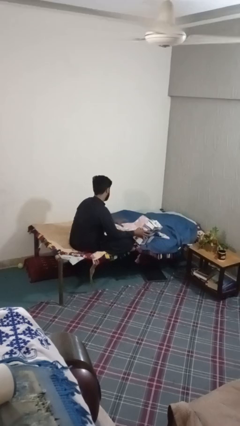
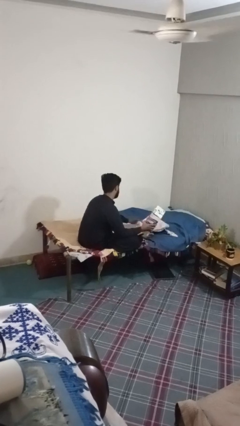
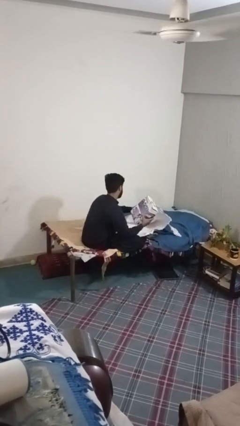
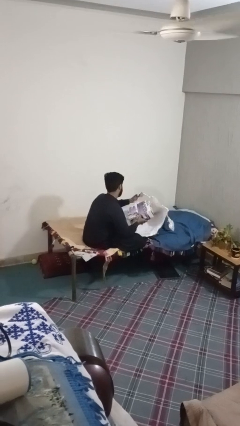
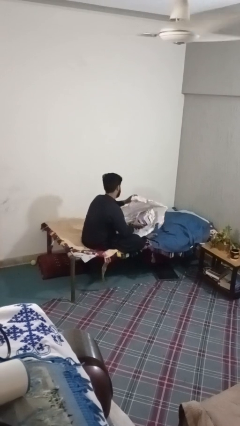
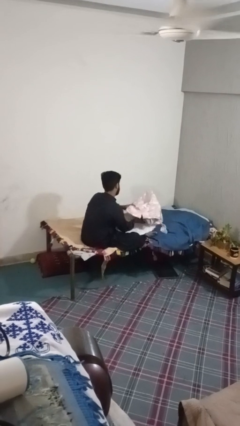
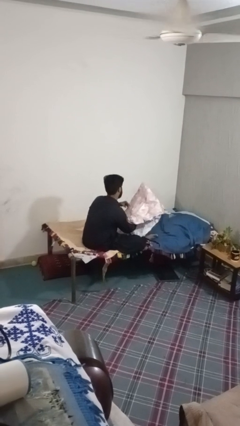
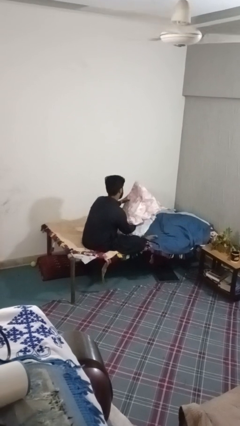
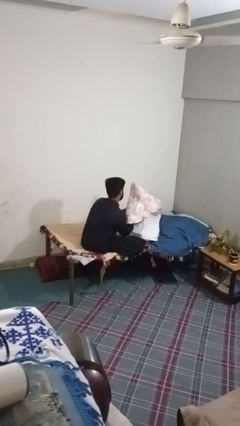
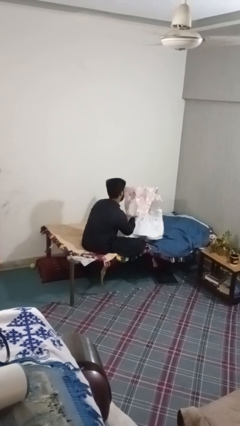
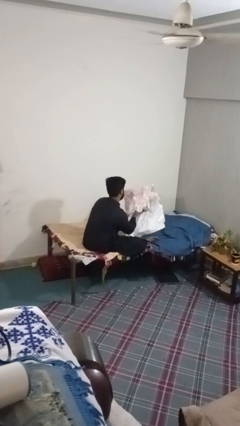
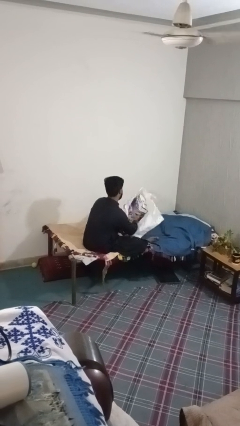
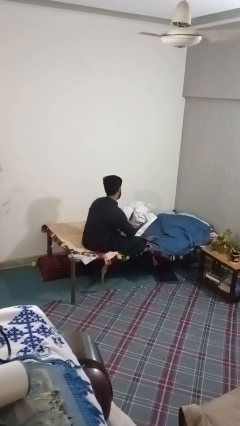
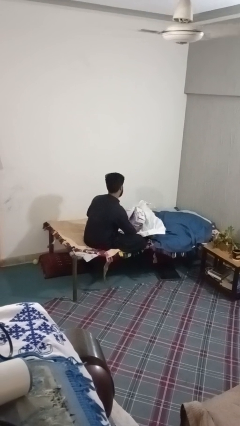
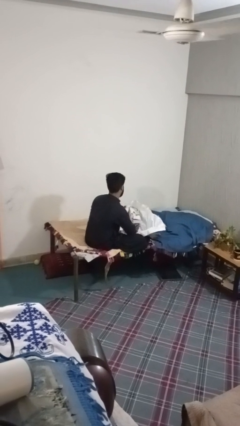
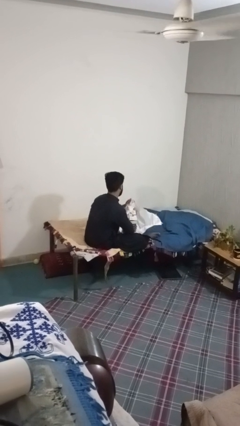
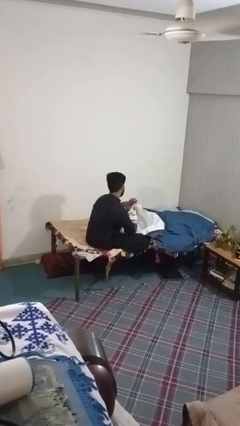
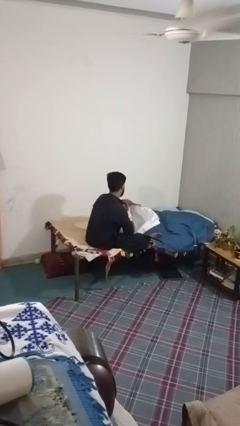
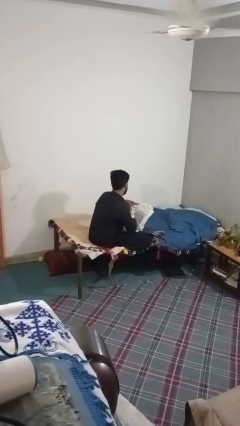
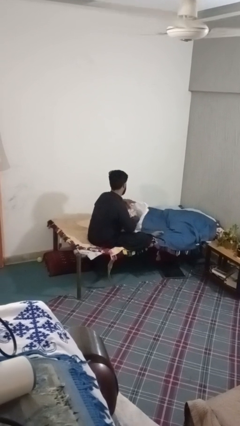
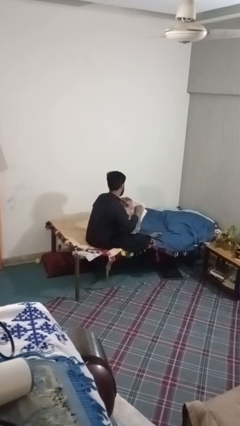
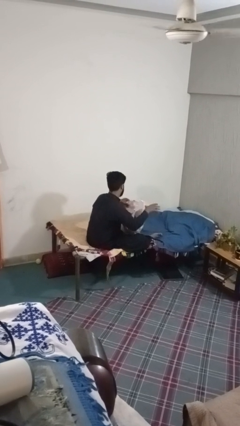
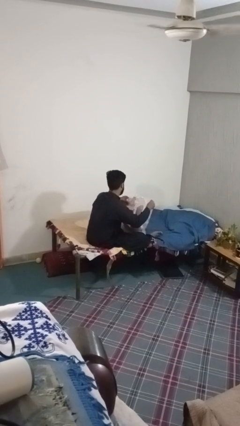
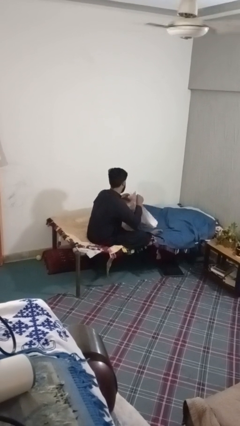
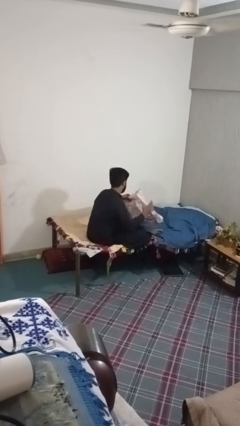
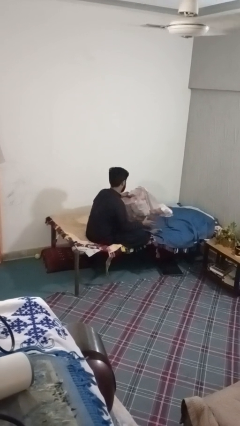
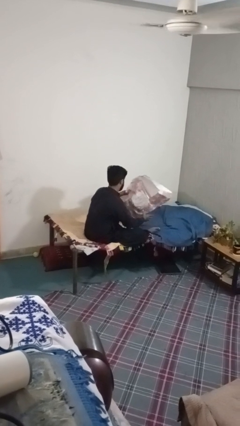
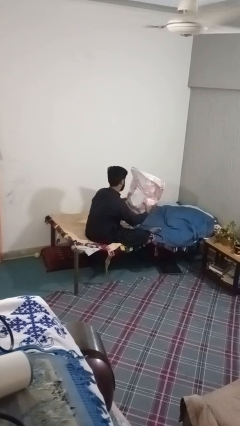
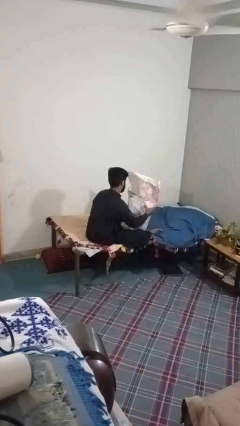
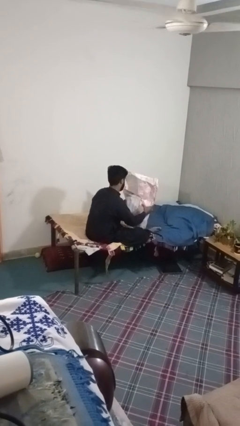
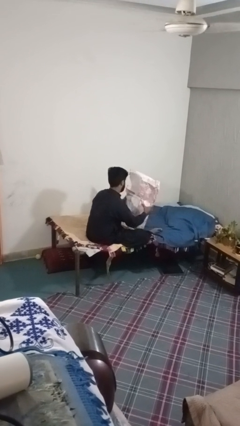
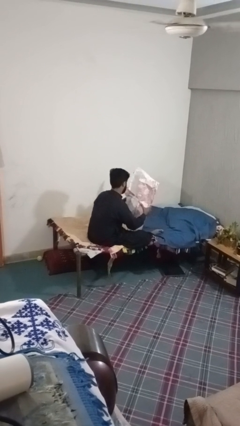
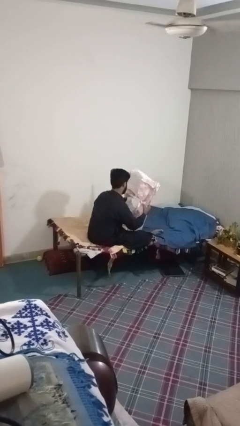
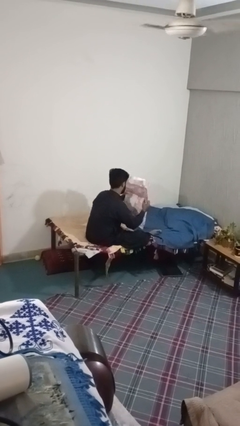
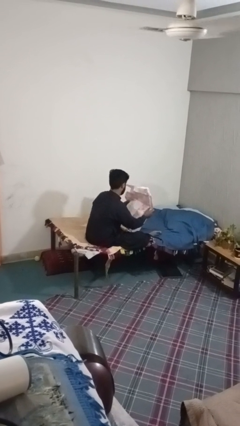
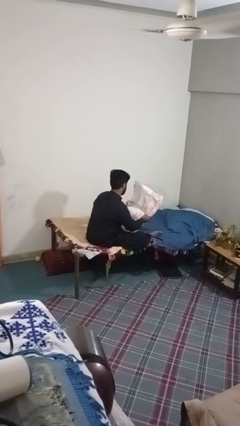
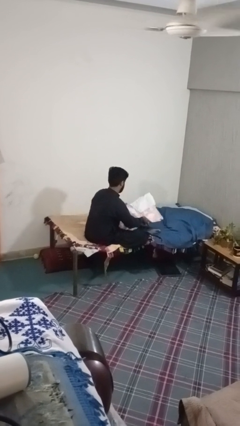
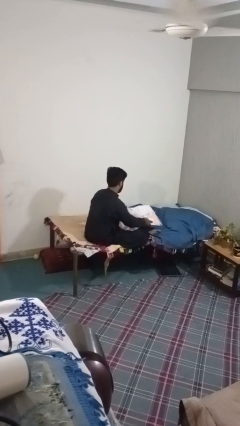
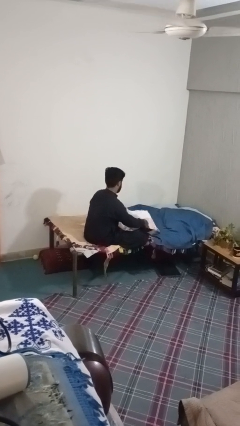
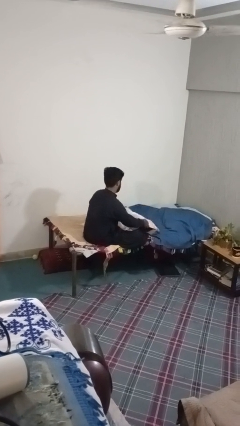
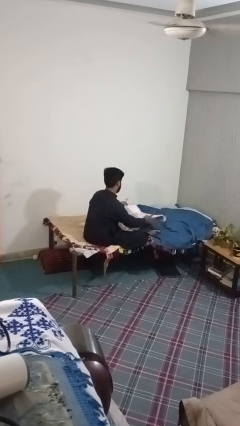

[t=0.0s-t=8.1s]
person wraps box

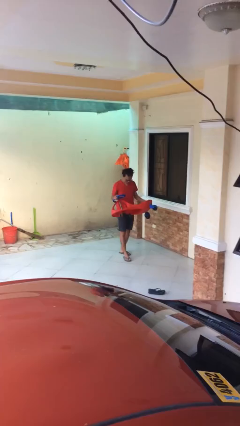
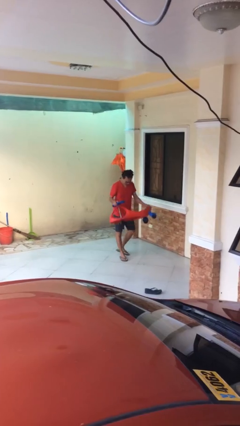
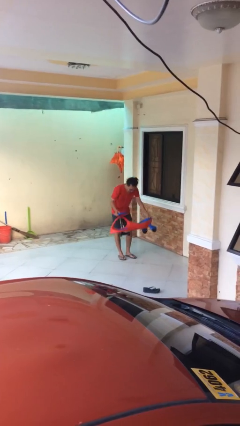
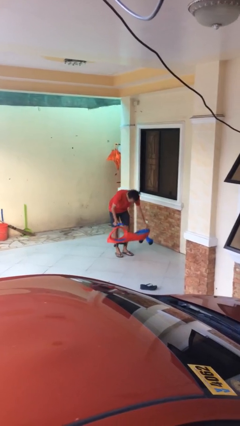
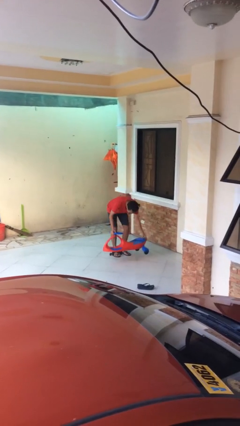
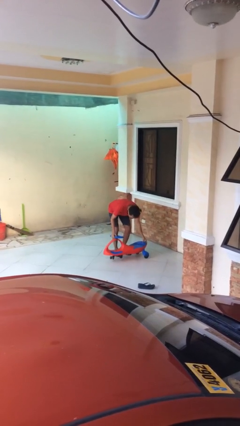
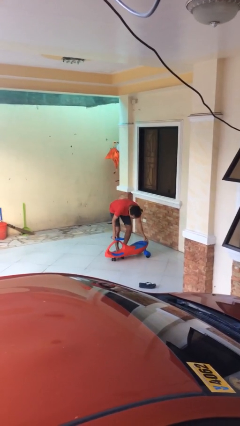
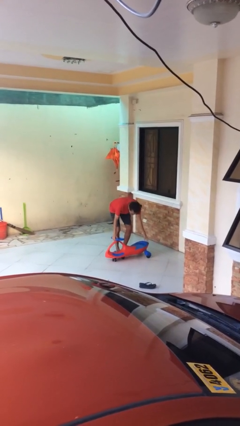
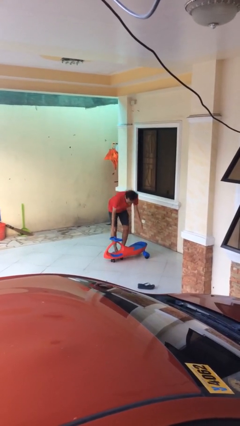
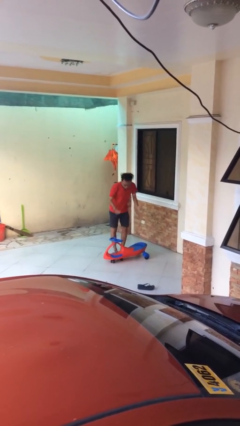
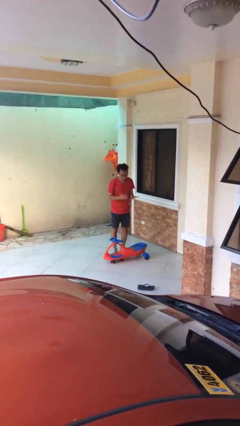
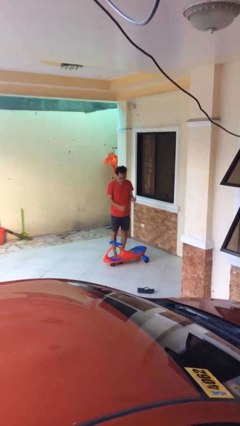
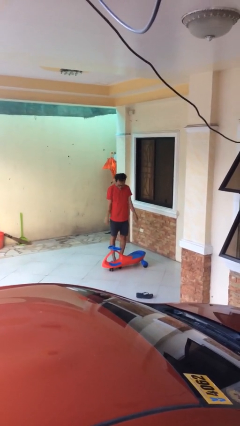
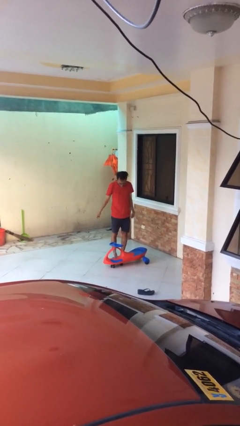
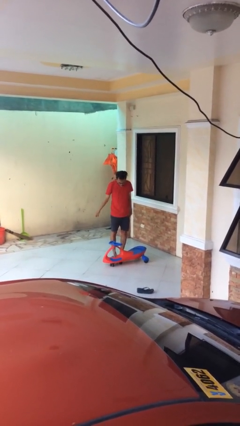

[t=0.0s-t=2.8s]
person puts down object on floor

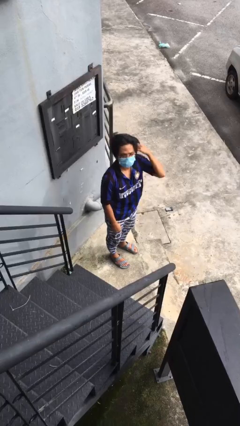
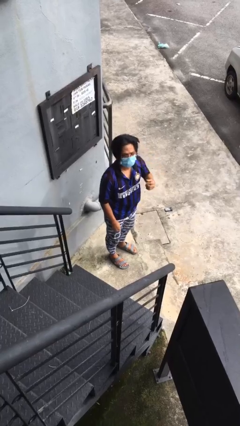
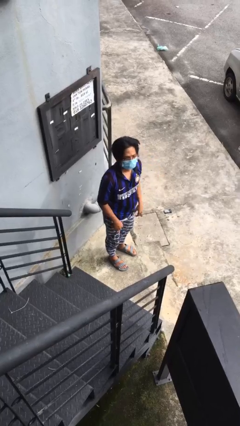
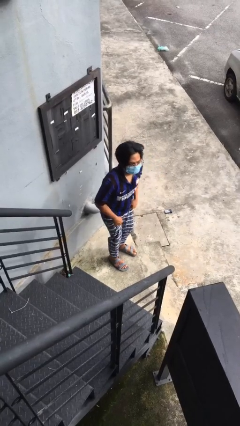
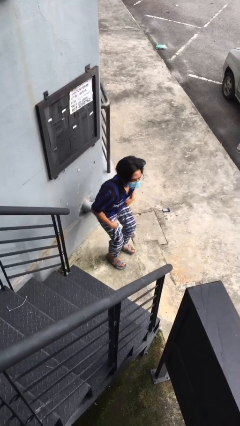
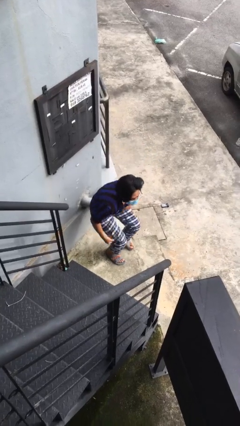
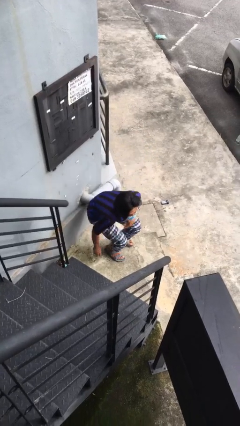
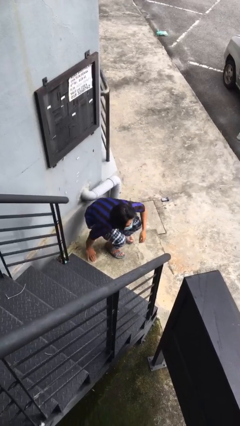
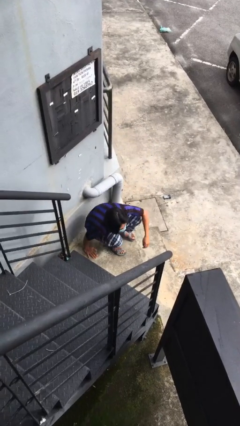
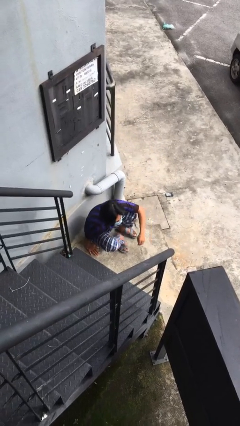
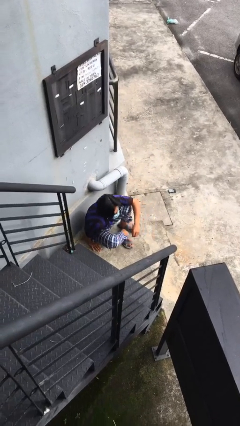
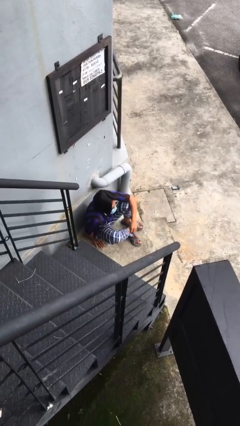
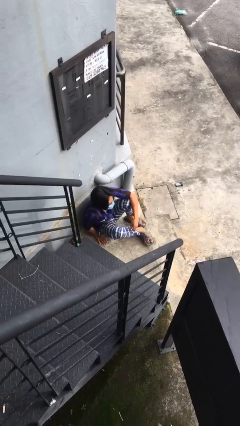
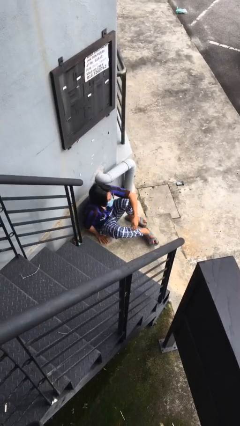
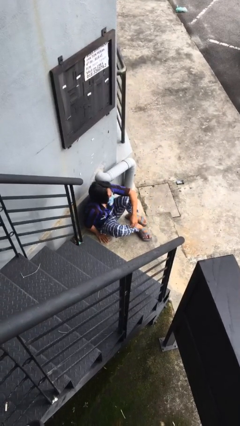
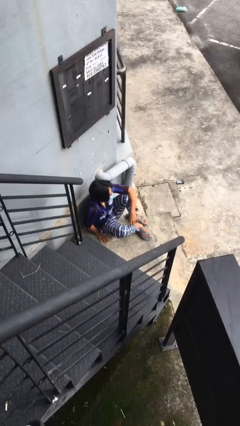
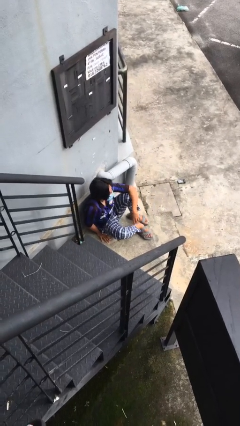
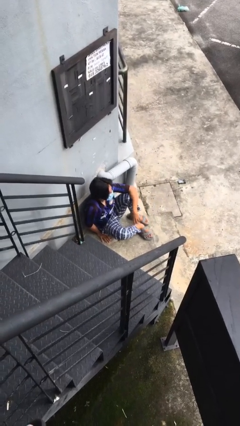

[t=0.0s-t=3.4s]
person sits down

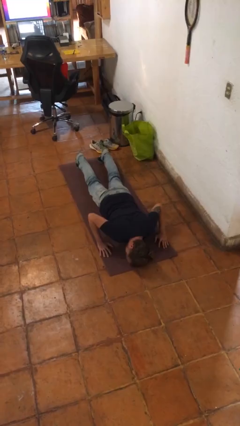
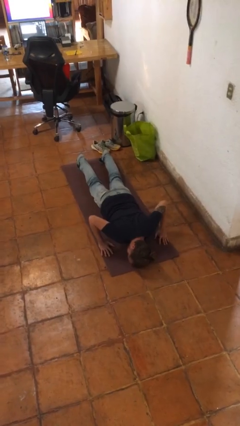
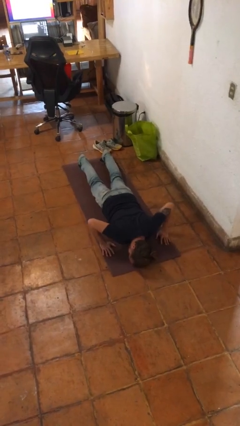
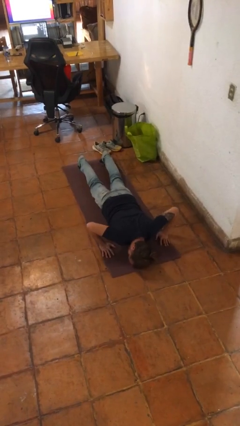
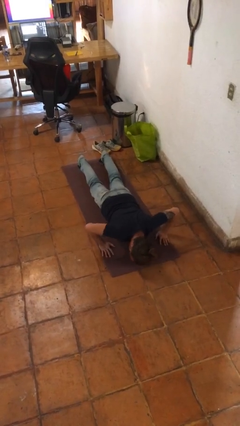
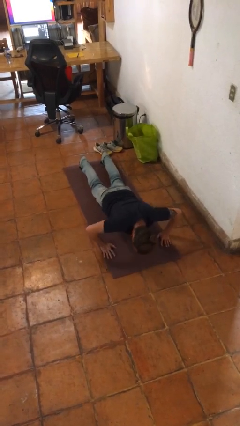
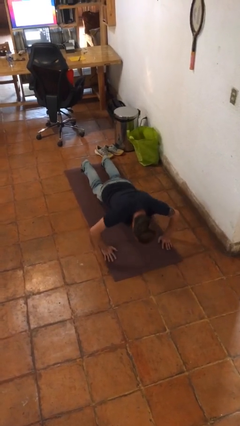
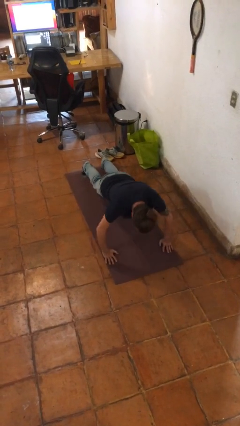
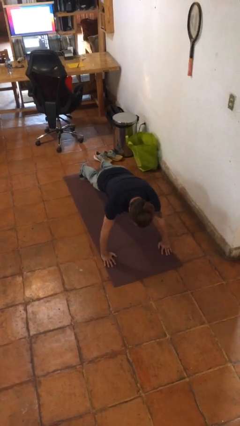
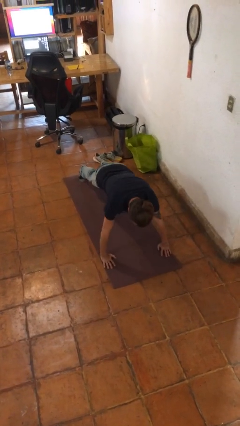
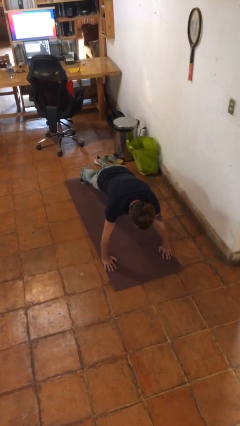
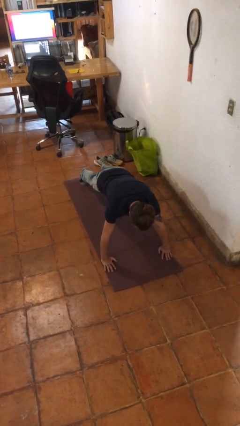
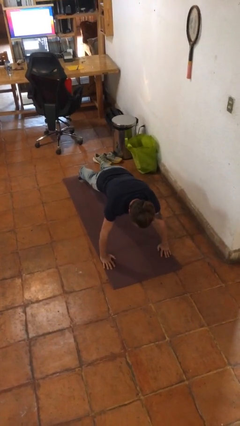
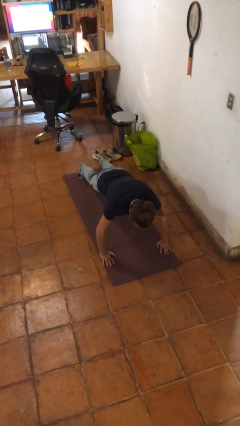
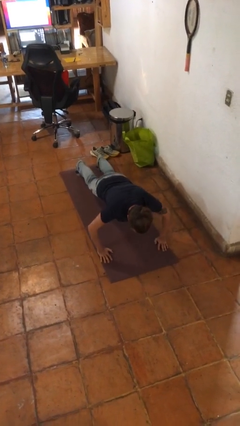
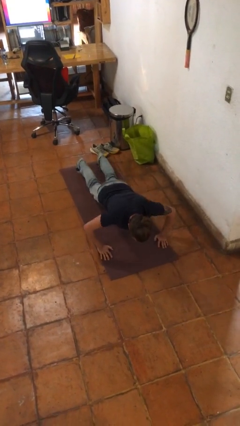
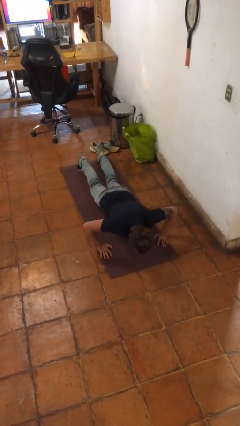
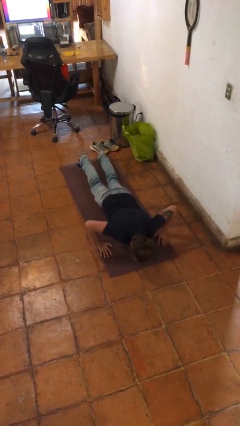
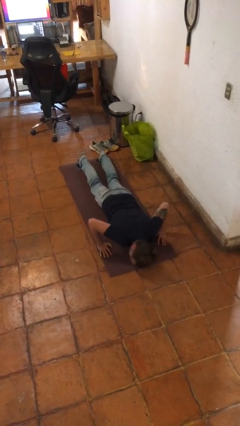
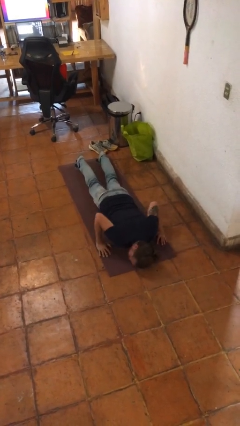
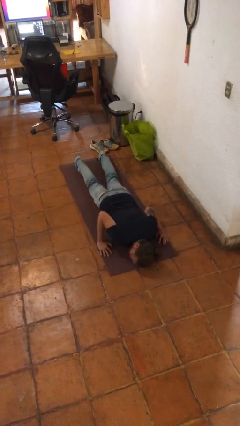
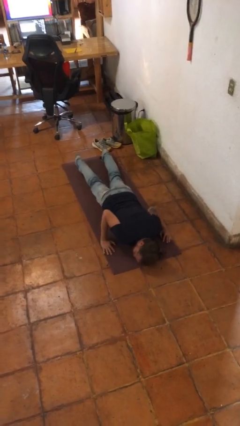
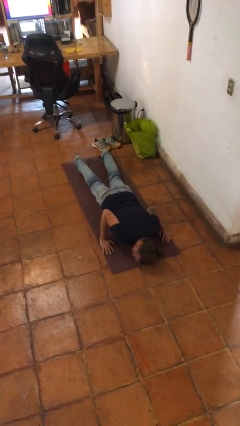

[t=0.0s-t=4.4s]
person exercises with pushup
